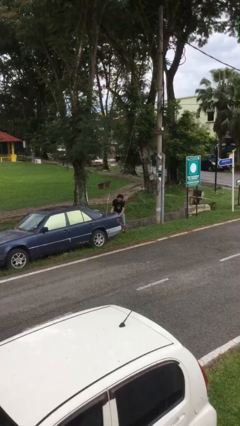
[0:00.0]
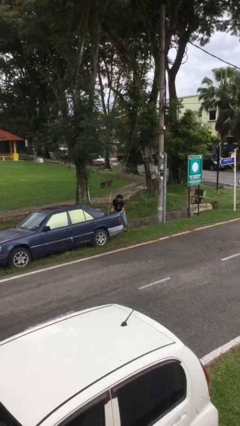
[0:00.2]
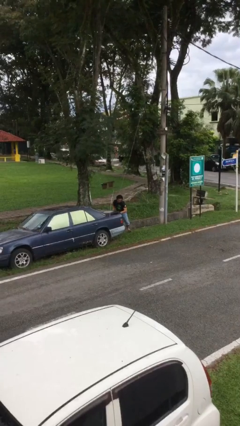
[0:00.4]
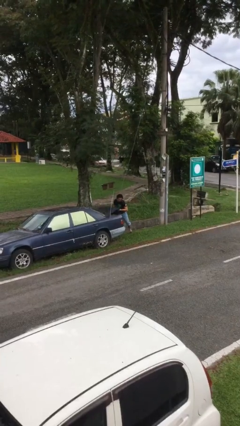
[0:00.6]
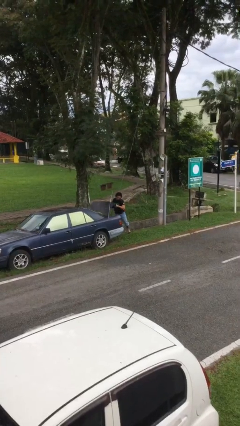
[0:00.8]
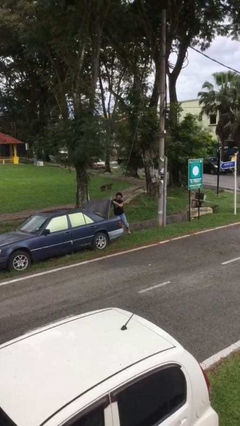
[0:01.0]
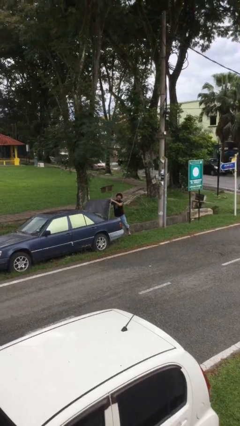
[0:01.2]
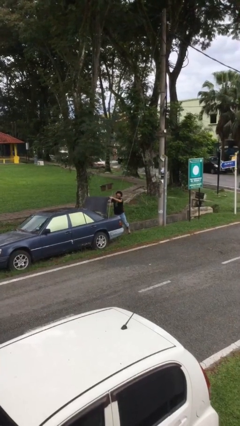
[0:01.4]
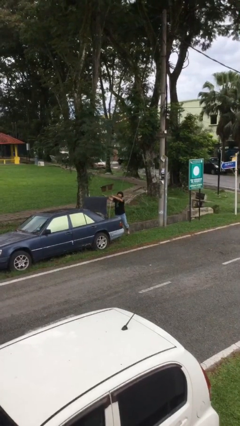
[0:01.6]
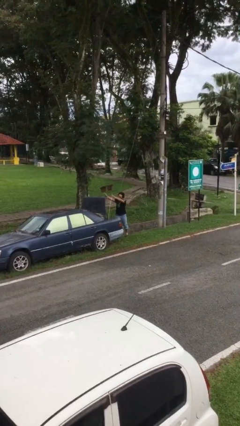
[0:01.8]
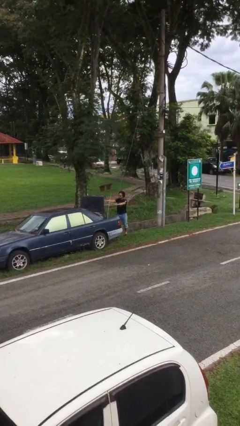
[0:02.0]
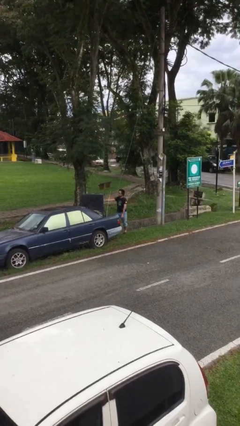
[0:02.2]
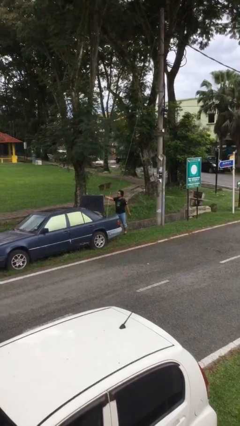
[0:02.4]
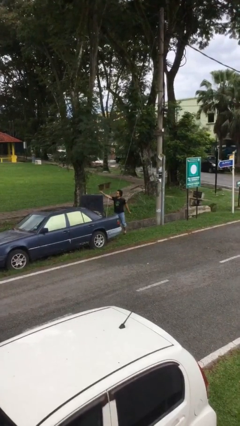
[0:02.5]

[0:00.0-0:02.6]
person opens car trunk

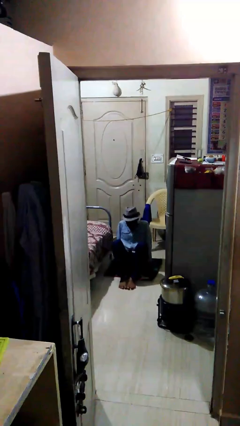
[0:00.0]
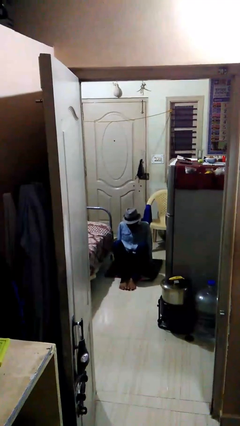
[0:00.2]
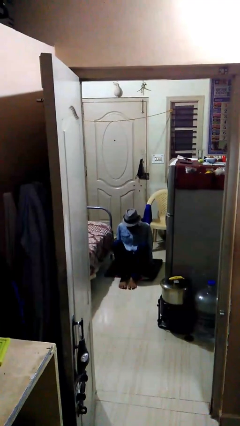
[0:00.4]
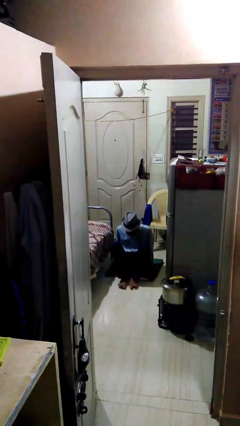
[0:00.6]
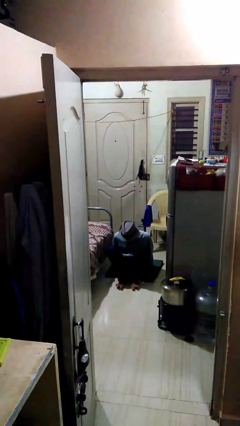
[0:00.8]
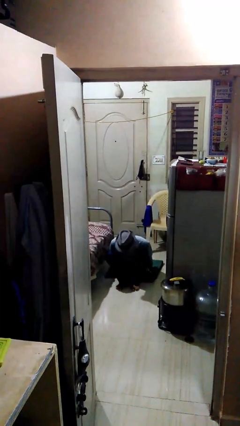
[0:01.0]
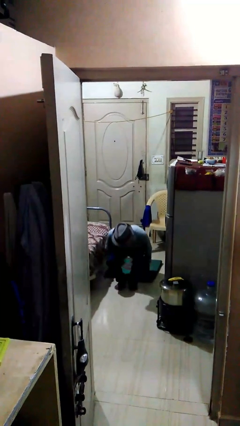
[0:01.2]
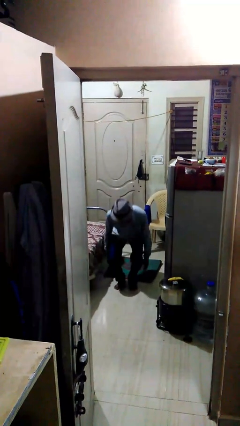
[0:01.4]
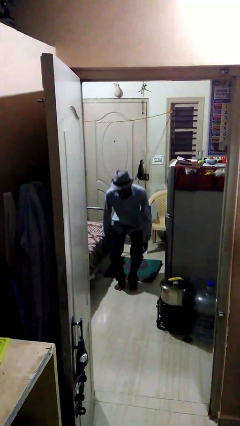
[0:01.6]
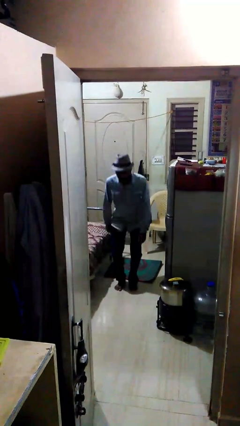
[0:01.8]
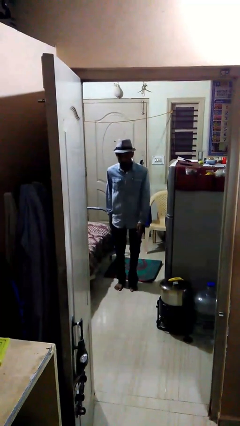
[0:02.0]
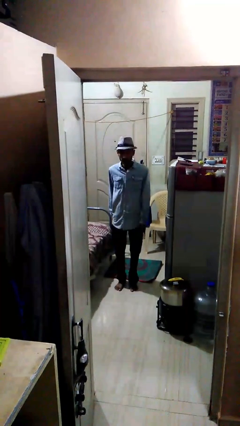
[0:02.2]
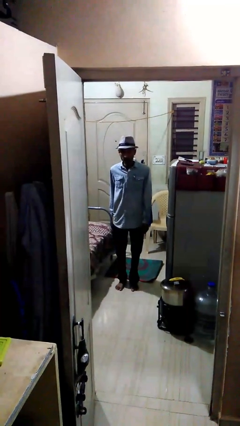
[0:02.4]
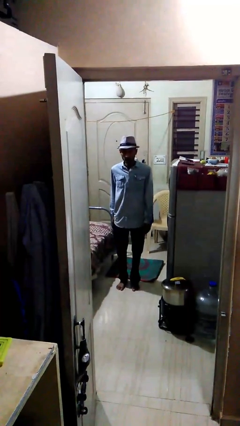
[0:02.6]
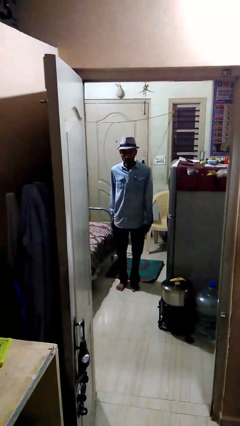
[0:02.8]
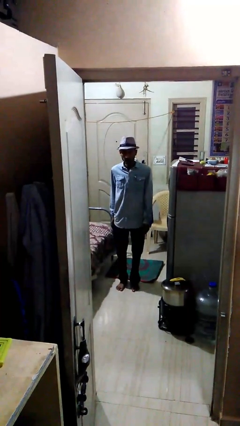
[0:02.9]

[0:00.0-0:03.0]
person stands up

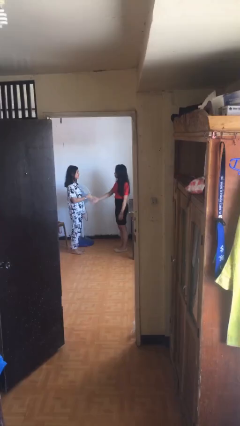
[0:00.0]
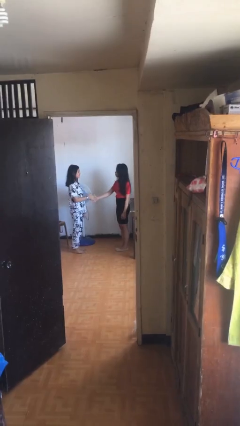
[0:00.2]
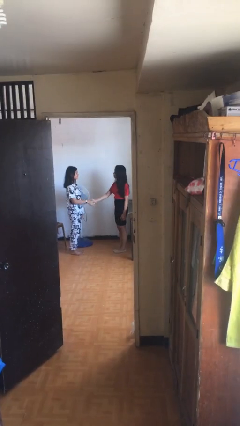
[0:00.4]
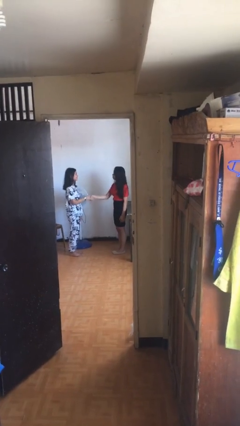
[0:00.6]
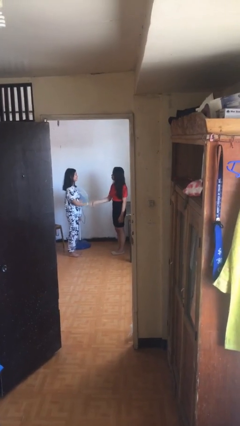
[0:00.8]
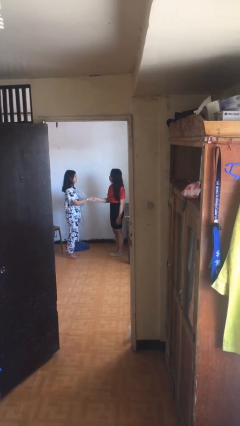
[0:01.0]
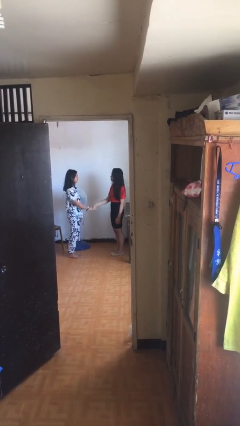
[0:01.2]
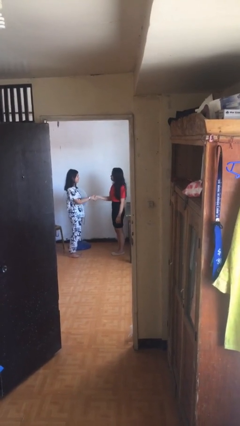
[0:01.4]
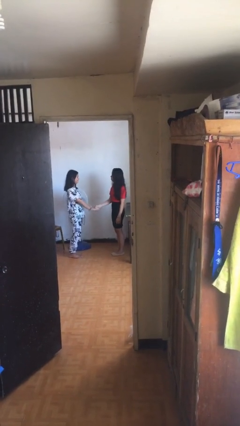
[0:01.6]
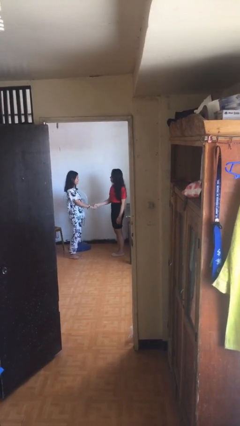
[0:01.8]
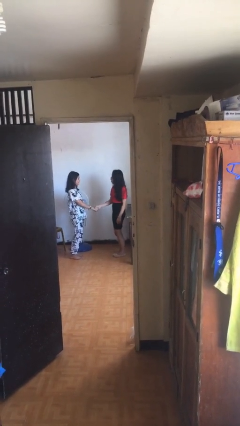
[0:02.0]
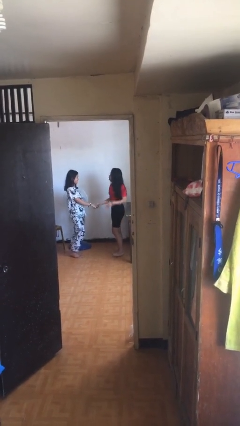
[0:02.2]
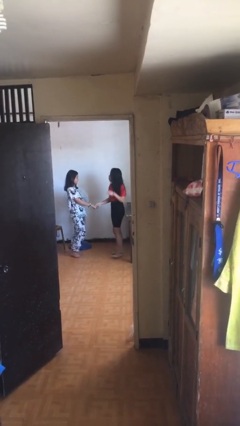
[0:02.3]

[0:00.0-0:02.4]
person shakes hand

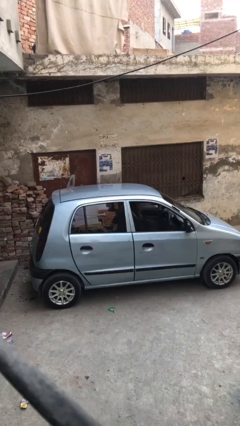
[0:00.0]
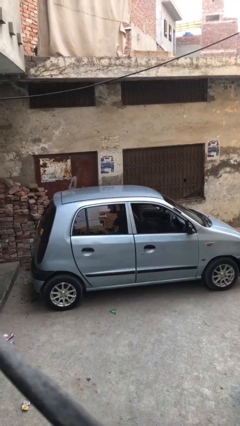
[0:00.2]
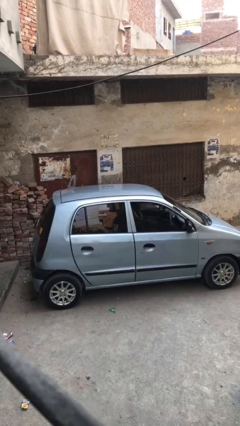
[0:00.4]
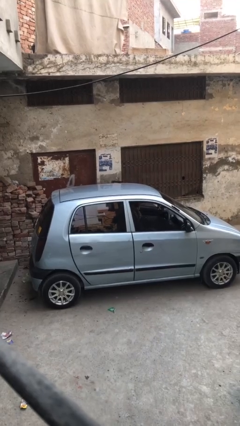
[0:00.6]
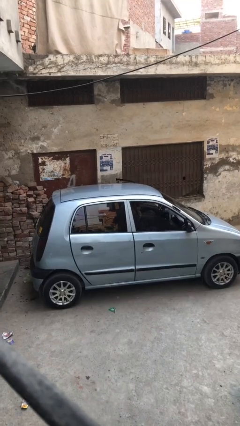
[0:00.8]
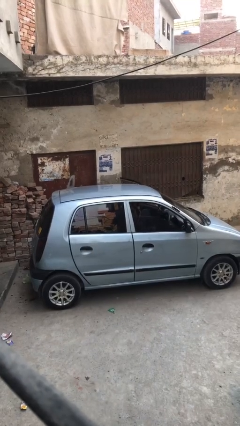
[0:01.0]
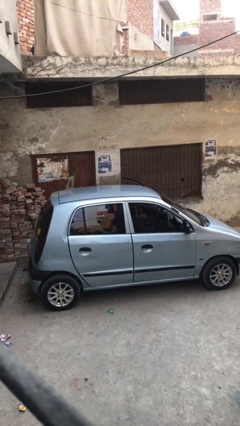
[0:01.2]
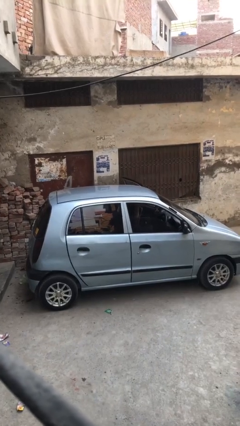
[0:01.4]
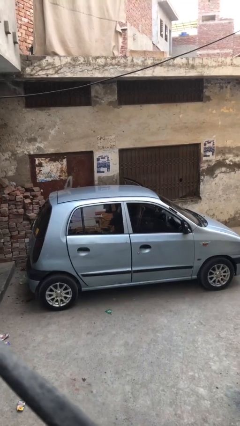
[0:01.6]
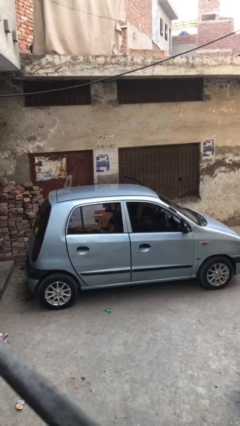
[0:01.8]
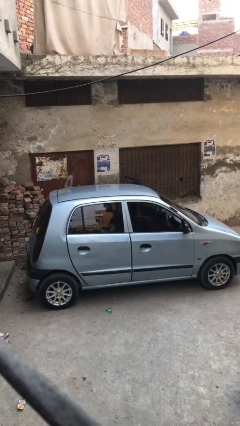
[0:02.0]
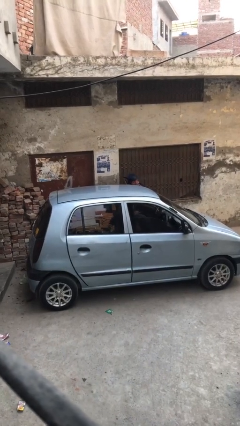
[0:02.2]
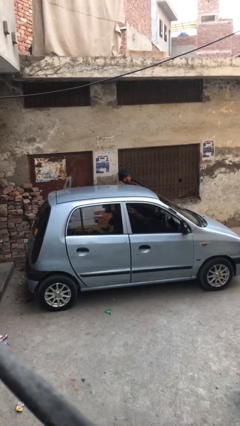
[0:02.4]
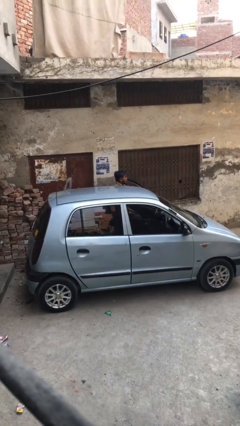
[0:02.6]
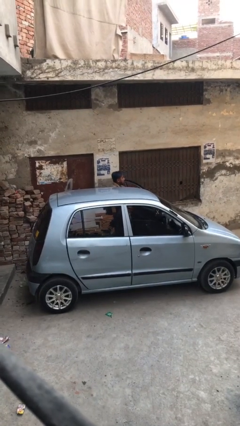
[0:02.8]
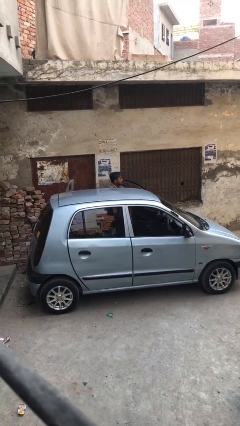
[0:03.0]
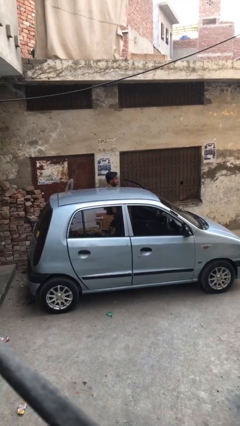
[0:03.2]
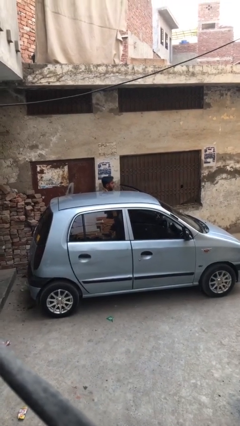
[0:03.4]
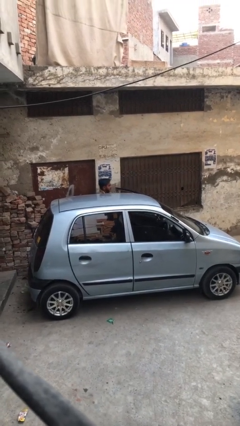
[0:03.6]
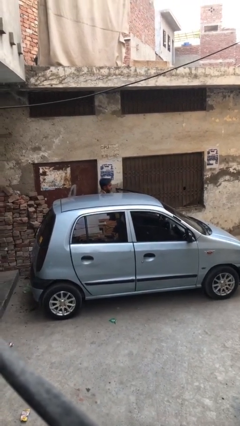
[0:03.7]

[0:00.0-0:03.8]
person exits car

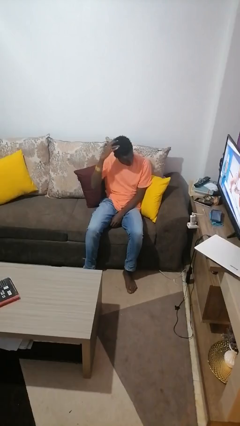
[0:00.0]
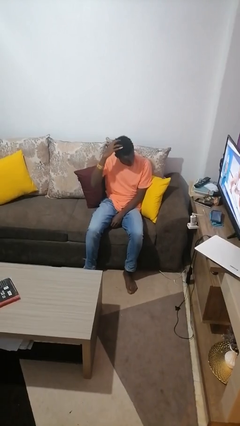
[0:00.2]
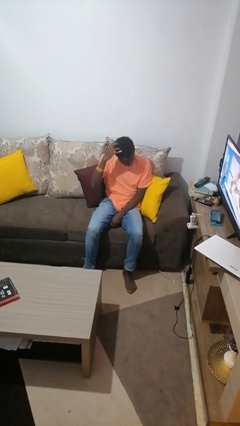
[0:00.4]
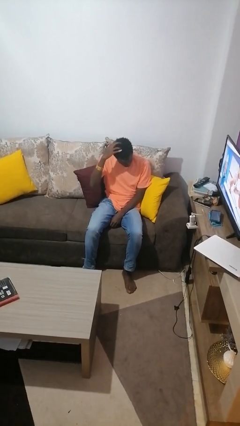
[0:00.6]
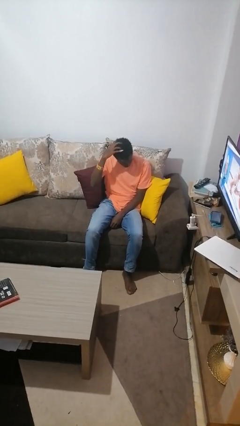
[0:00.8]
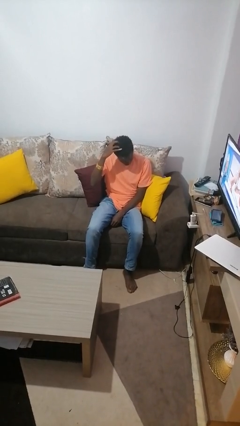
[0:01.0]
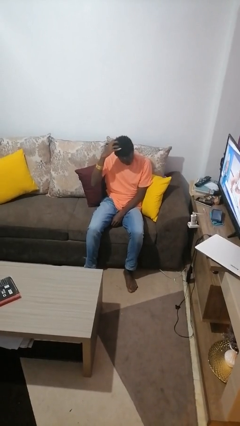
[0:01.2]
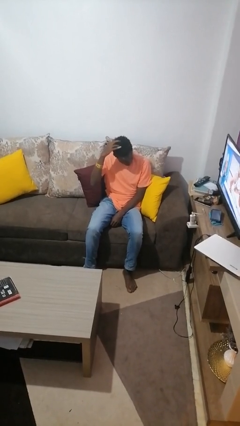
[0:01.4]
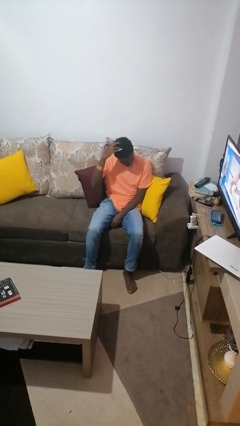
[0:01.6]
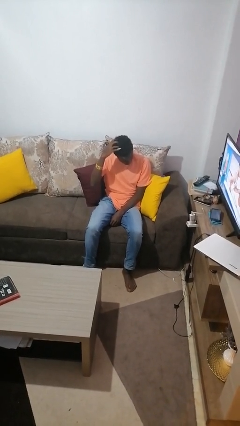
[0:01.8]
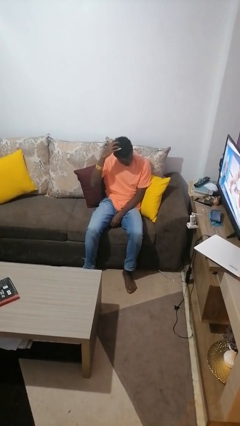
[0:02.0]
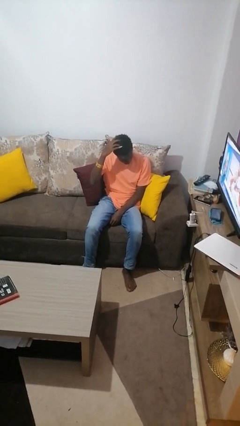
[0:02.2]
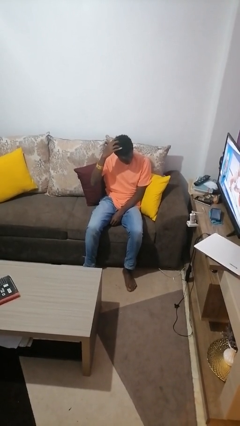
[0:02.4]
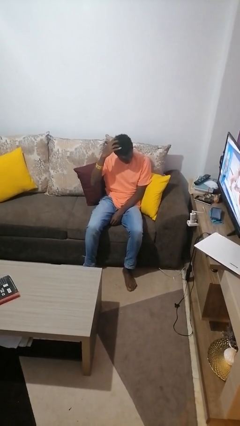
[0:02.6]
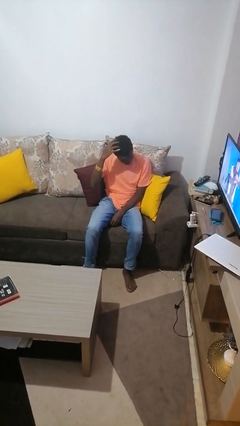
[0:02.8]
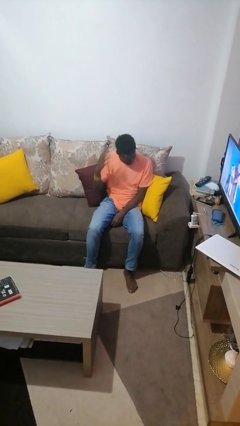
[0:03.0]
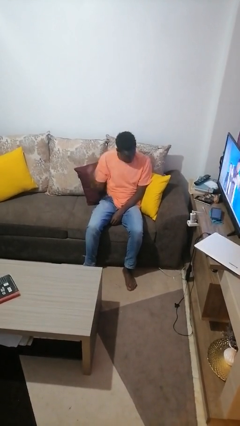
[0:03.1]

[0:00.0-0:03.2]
person strokes hair

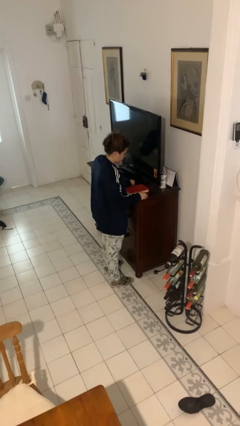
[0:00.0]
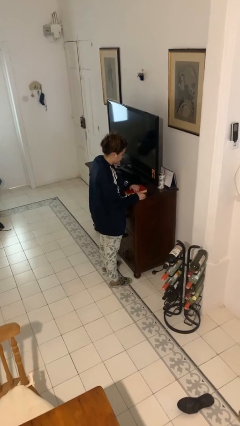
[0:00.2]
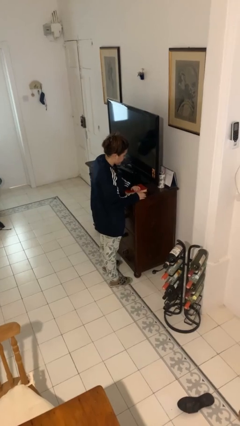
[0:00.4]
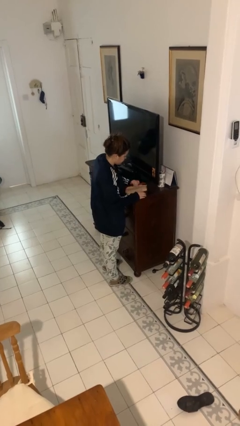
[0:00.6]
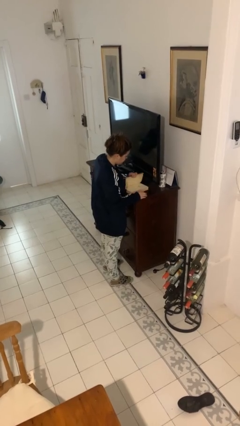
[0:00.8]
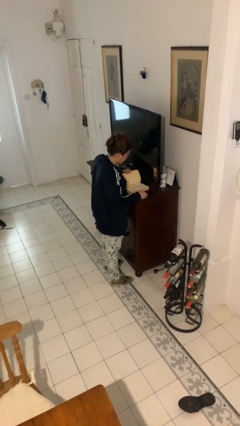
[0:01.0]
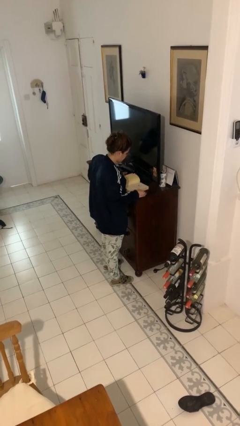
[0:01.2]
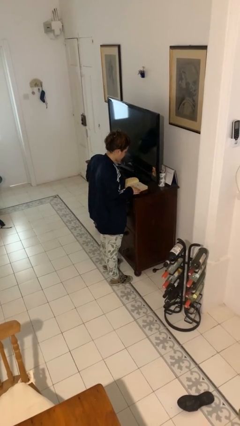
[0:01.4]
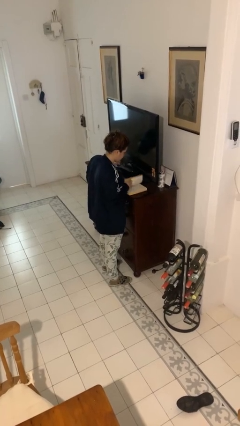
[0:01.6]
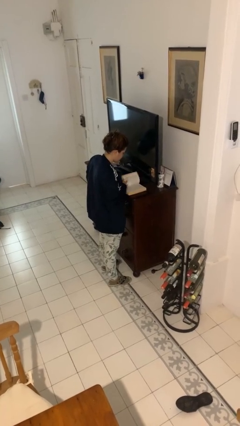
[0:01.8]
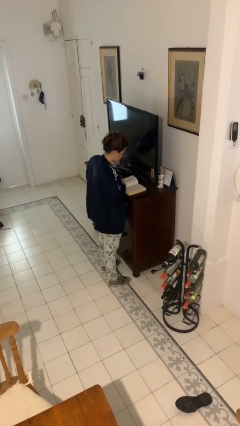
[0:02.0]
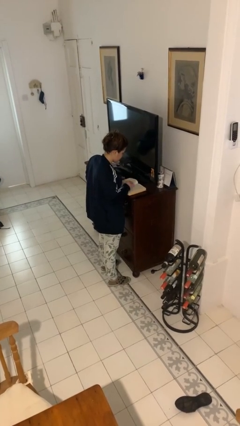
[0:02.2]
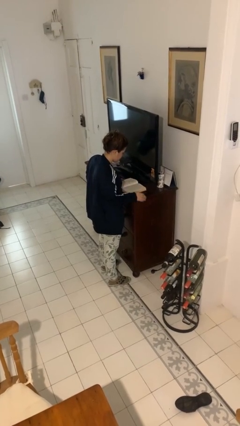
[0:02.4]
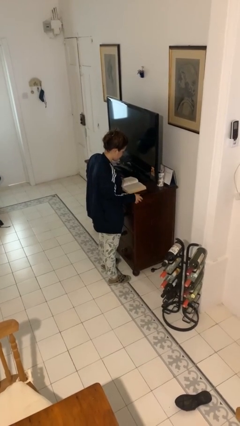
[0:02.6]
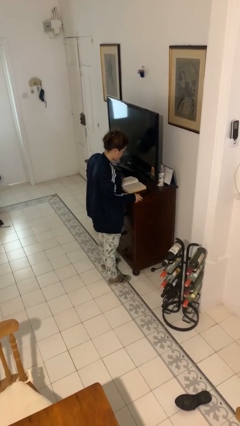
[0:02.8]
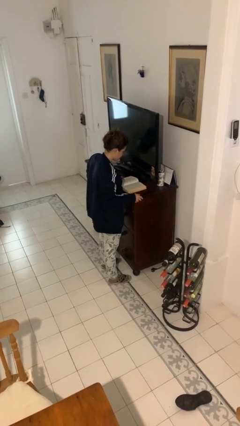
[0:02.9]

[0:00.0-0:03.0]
person reads book
